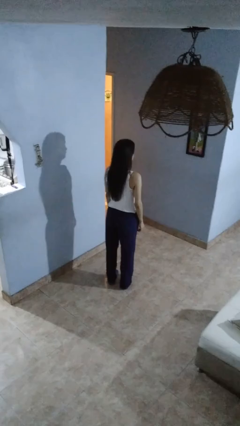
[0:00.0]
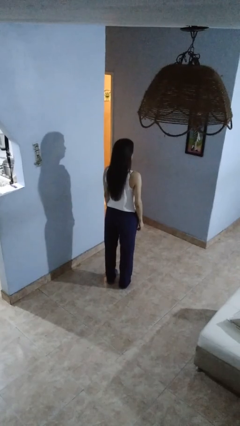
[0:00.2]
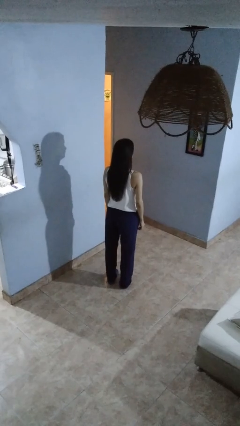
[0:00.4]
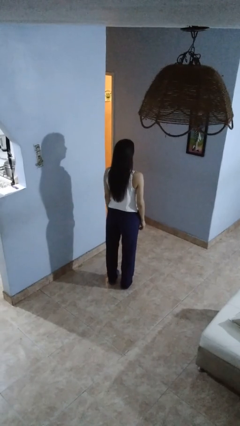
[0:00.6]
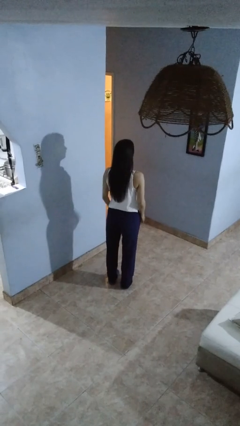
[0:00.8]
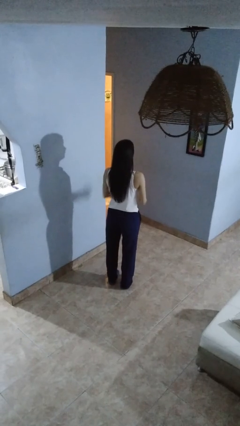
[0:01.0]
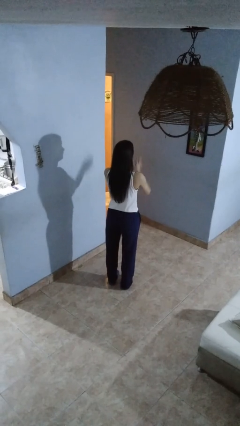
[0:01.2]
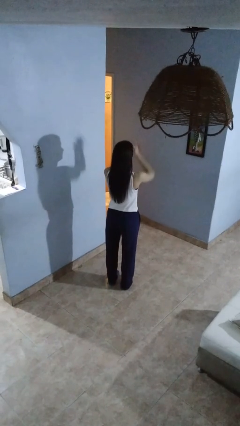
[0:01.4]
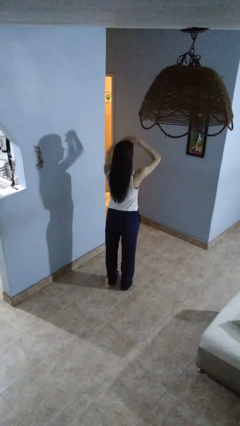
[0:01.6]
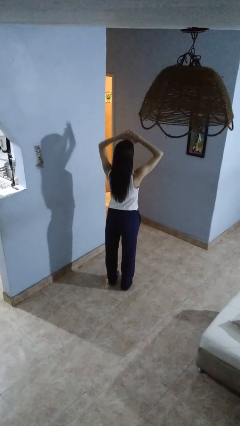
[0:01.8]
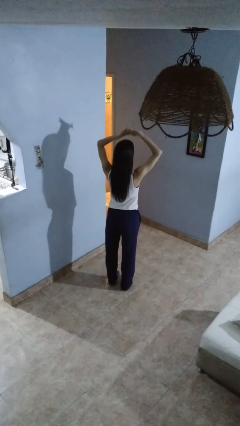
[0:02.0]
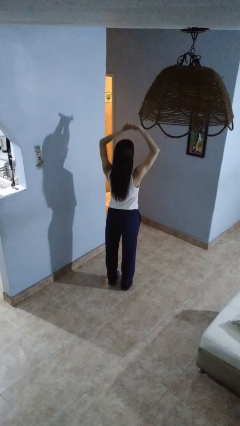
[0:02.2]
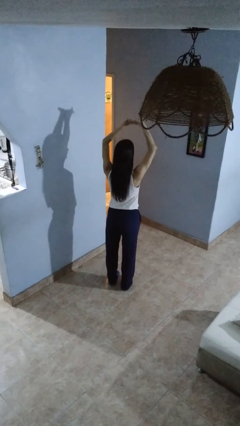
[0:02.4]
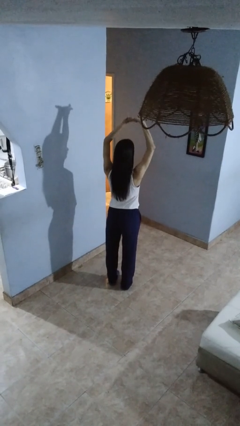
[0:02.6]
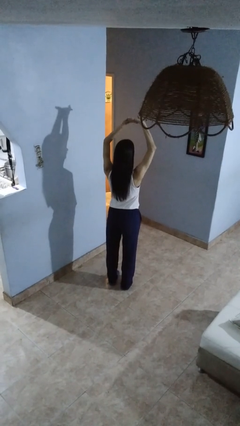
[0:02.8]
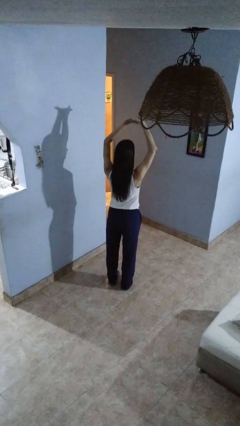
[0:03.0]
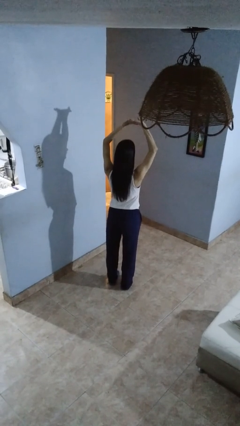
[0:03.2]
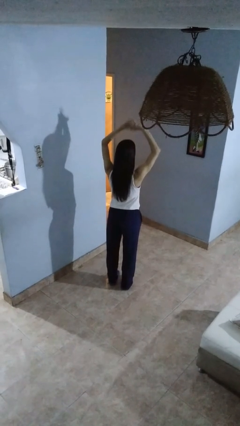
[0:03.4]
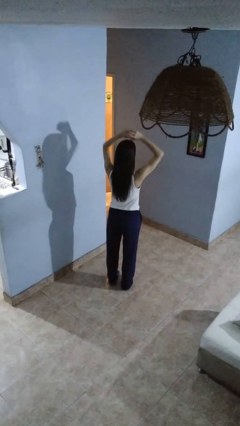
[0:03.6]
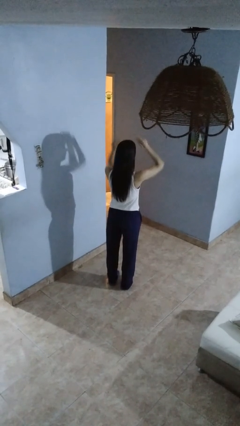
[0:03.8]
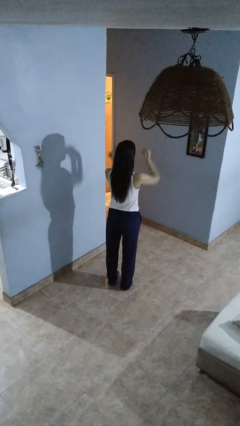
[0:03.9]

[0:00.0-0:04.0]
person cracks knuckles

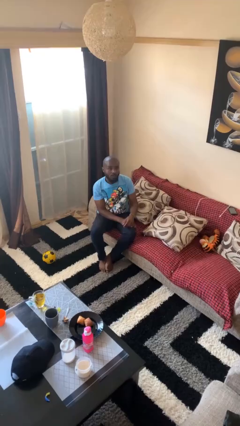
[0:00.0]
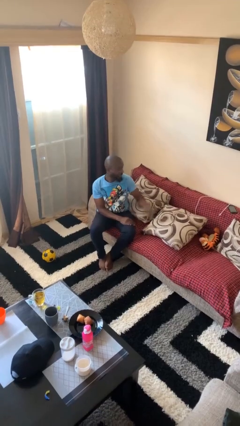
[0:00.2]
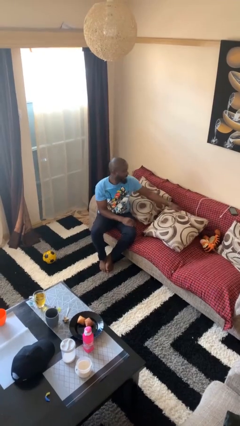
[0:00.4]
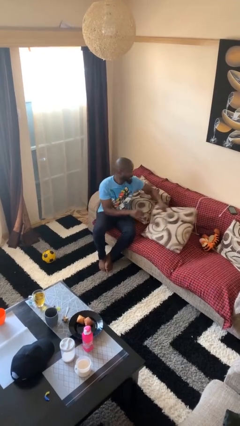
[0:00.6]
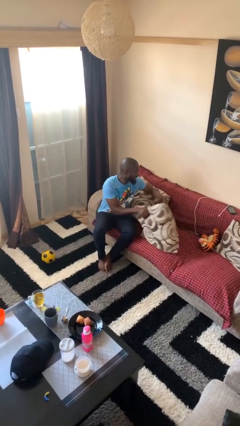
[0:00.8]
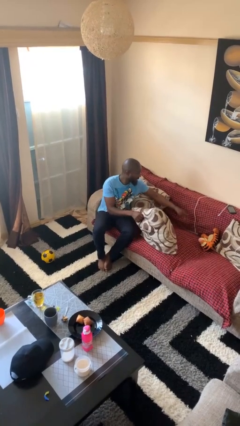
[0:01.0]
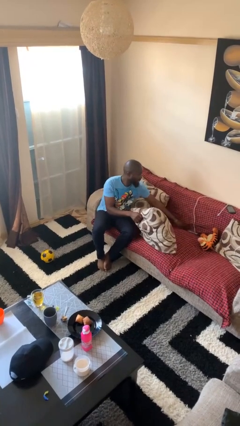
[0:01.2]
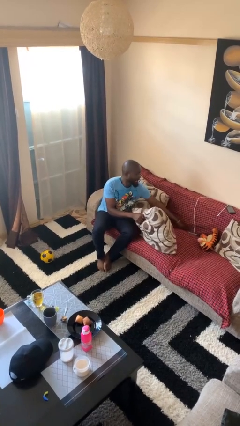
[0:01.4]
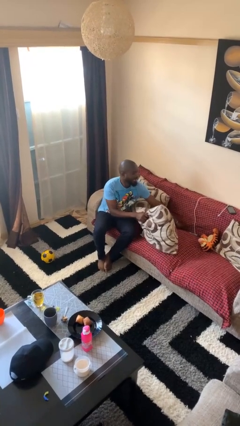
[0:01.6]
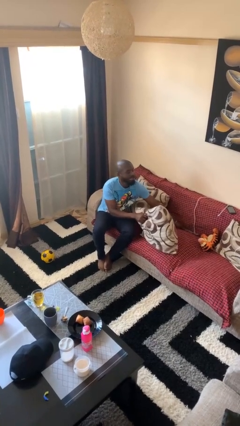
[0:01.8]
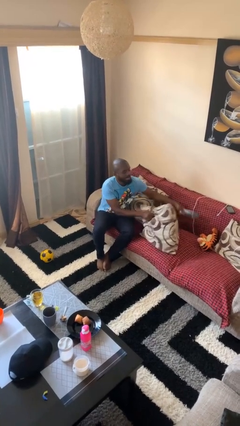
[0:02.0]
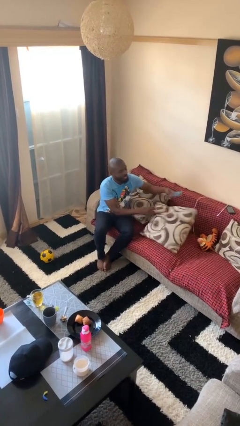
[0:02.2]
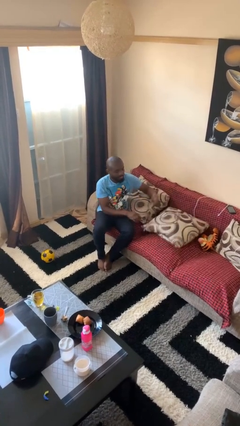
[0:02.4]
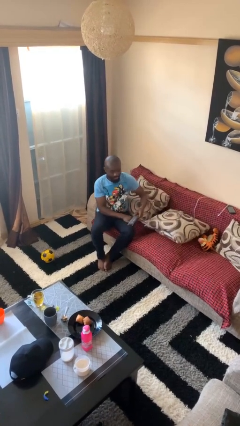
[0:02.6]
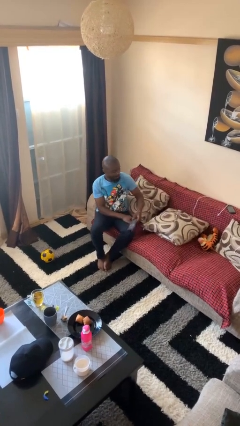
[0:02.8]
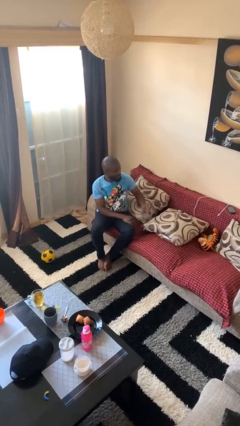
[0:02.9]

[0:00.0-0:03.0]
person searches in couch

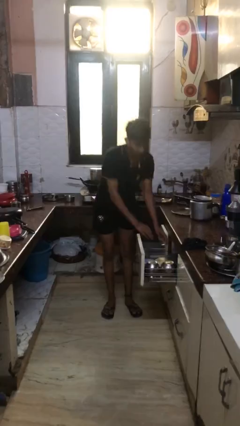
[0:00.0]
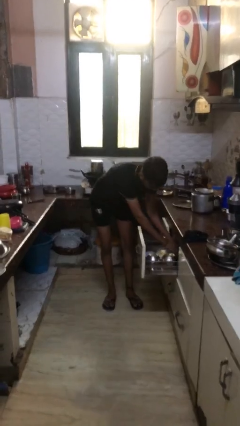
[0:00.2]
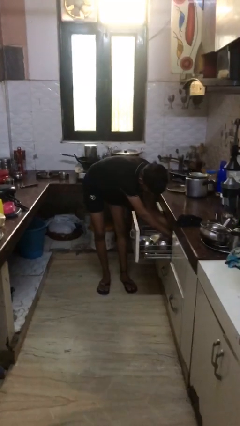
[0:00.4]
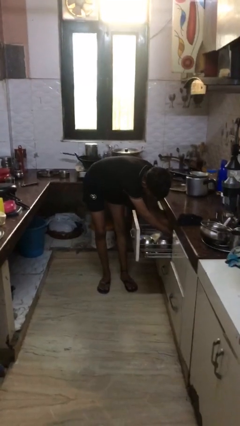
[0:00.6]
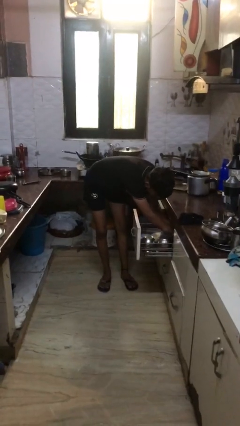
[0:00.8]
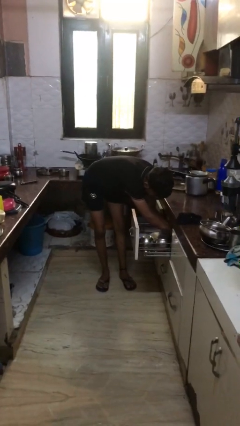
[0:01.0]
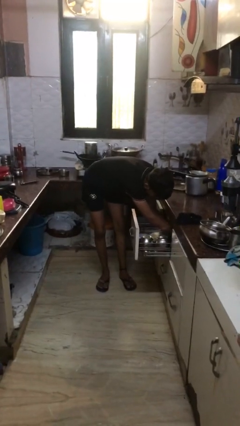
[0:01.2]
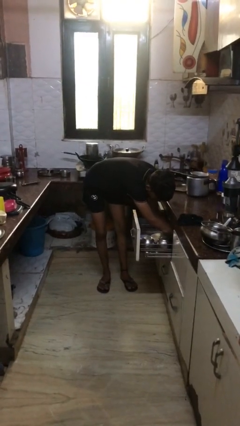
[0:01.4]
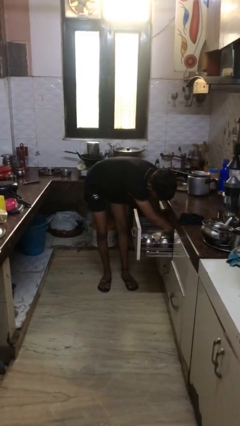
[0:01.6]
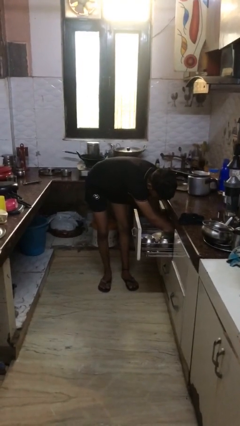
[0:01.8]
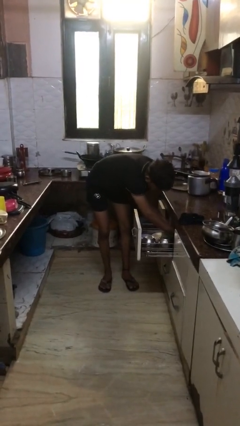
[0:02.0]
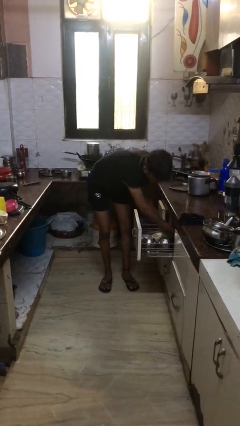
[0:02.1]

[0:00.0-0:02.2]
person searches in kitchen drawer

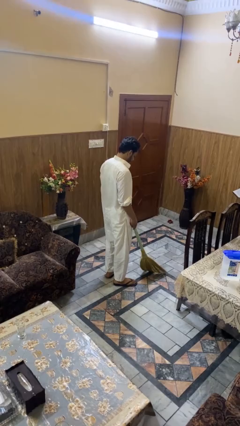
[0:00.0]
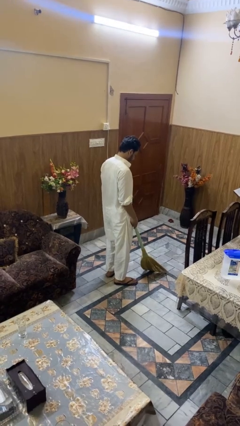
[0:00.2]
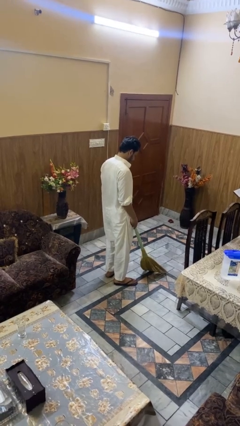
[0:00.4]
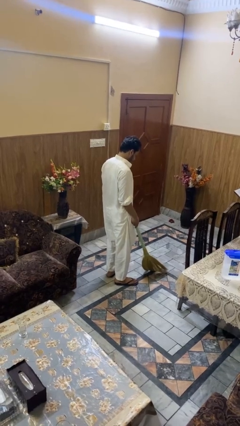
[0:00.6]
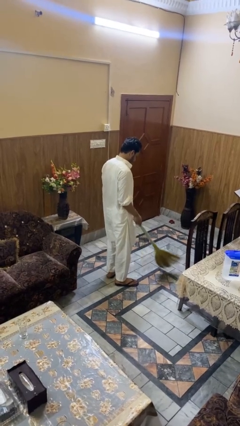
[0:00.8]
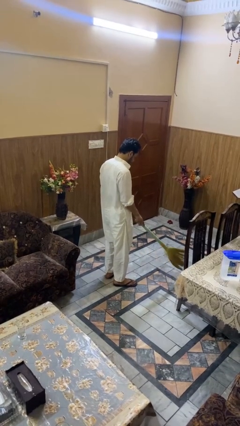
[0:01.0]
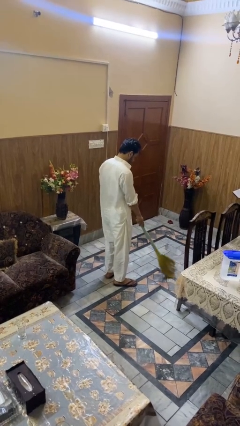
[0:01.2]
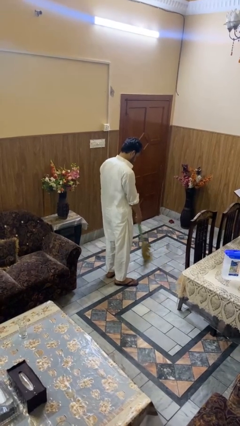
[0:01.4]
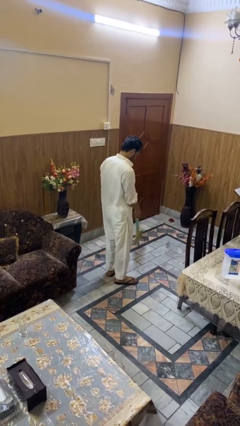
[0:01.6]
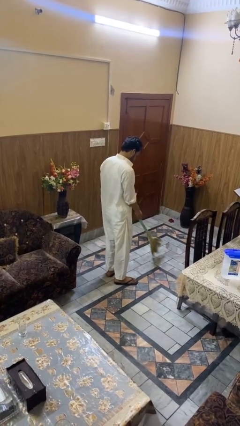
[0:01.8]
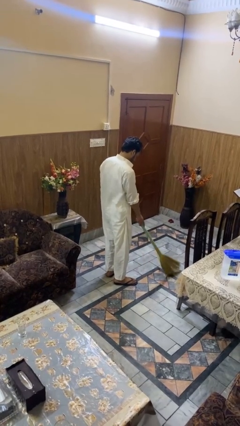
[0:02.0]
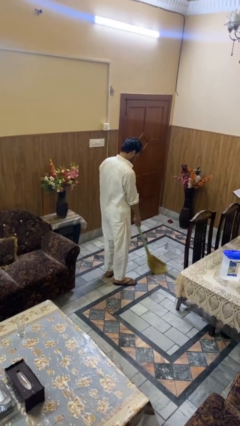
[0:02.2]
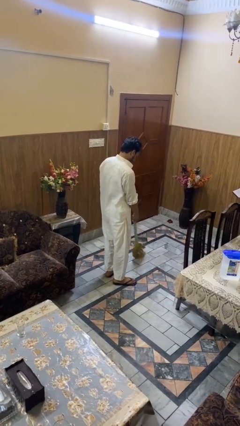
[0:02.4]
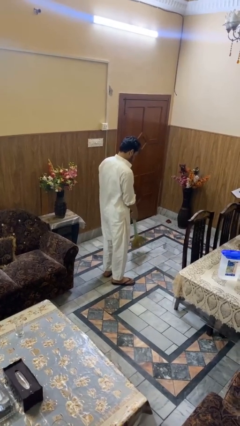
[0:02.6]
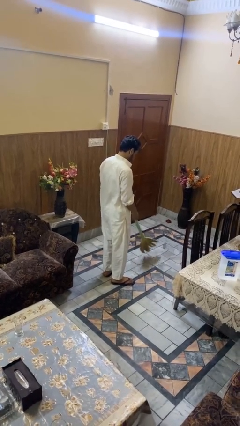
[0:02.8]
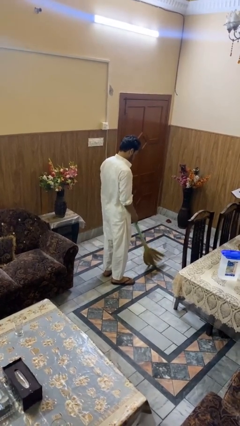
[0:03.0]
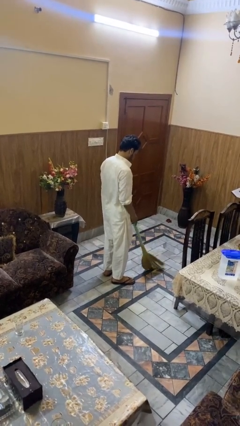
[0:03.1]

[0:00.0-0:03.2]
person sweeps floor

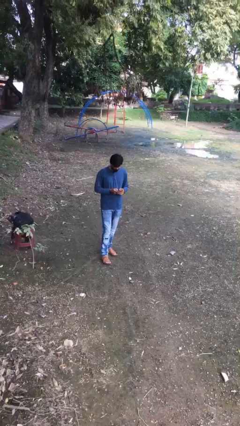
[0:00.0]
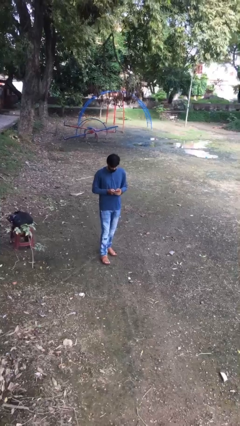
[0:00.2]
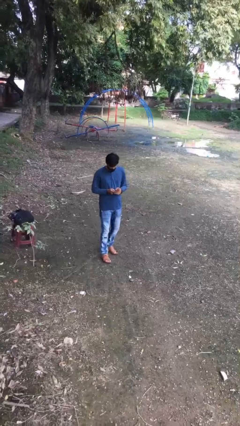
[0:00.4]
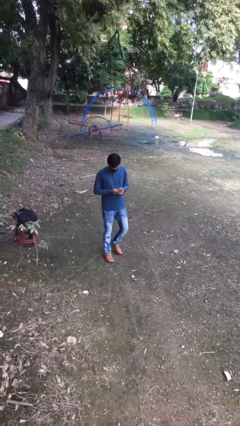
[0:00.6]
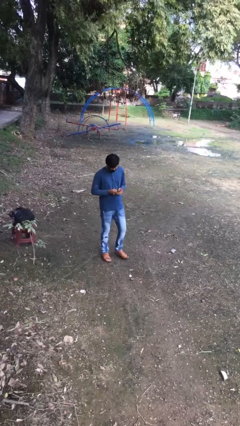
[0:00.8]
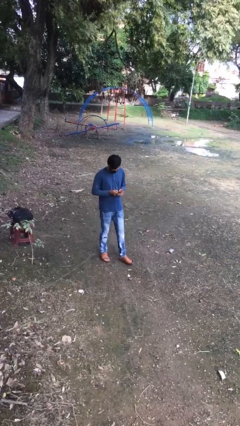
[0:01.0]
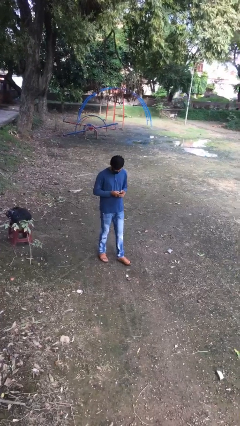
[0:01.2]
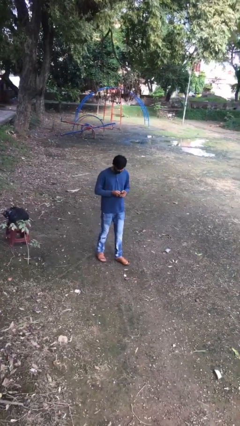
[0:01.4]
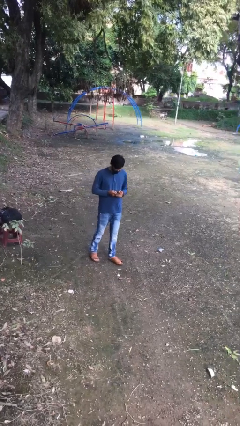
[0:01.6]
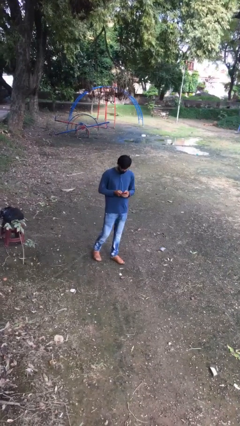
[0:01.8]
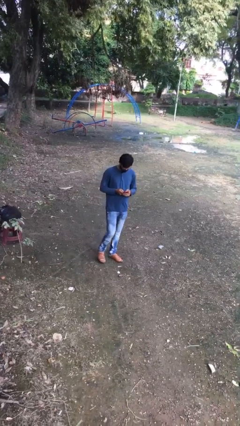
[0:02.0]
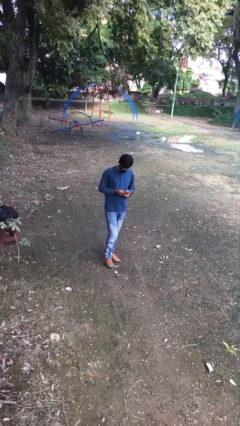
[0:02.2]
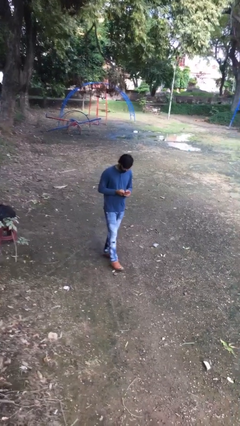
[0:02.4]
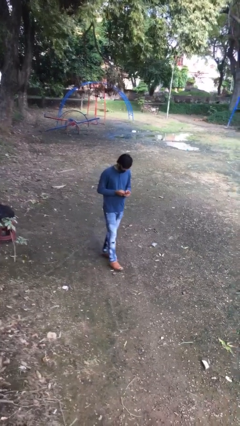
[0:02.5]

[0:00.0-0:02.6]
person texts on phone

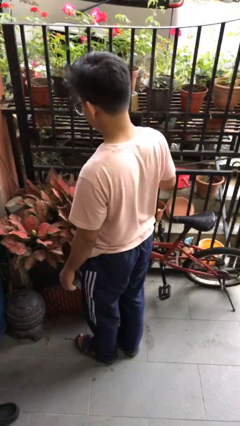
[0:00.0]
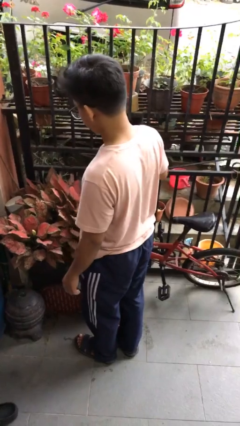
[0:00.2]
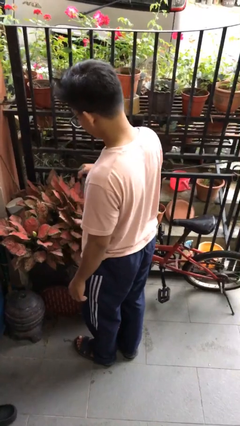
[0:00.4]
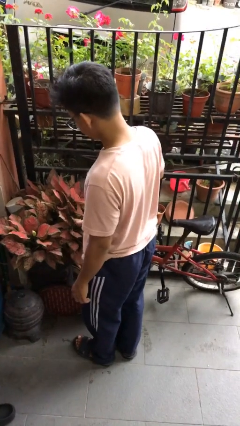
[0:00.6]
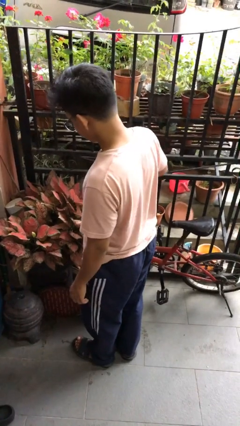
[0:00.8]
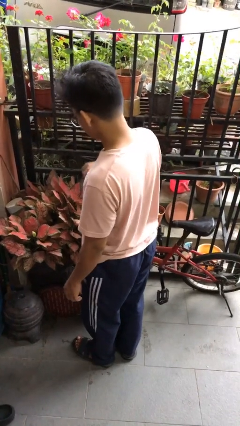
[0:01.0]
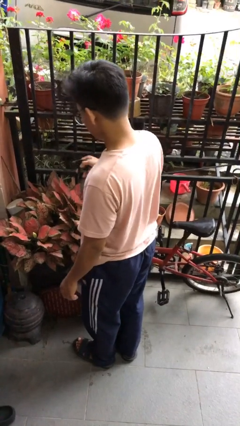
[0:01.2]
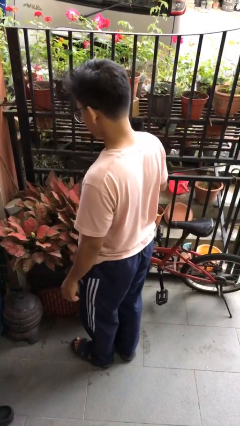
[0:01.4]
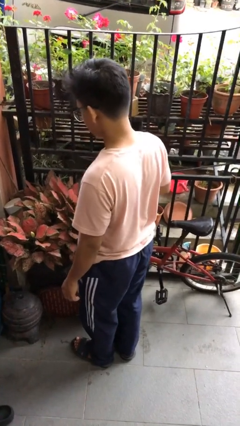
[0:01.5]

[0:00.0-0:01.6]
person waters houseplant

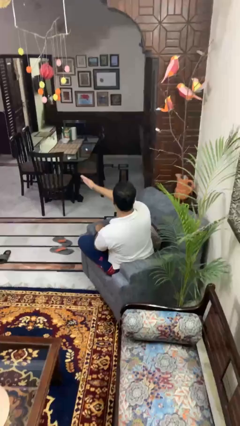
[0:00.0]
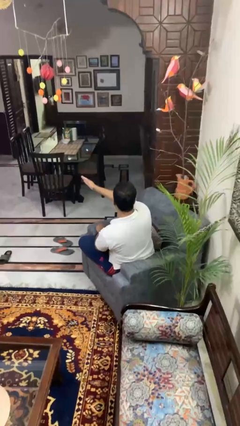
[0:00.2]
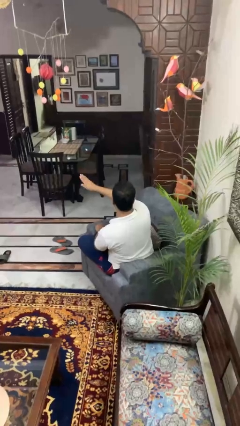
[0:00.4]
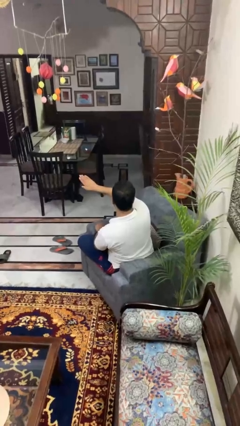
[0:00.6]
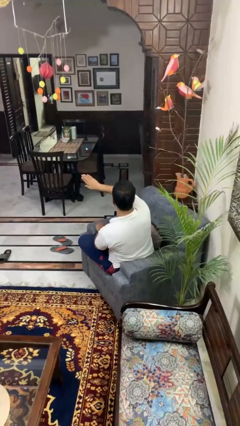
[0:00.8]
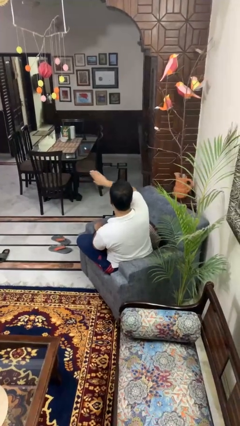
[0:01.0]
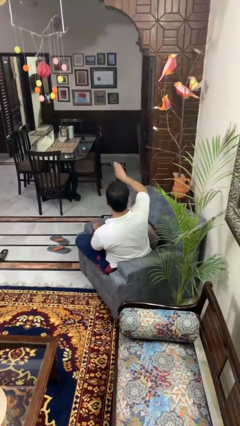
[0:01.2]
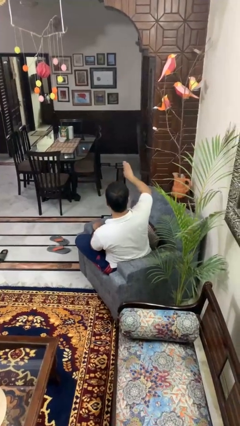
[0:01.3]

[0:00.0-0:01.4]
person gestures swipe right
